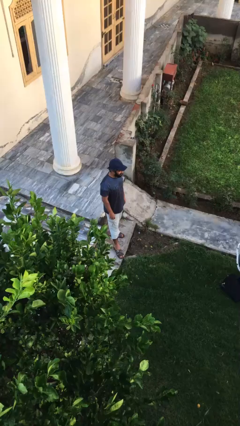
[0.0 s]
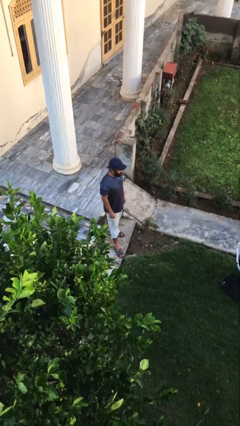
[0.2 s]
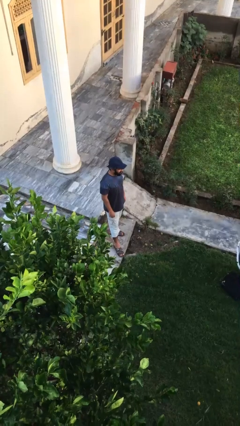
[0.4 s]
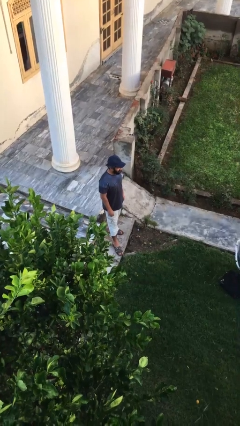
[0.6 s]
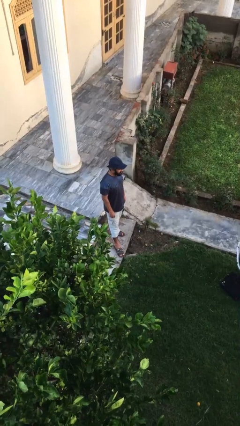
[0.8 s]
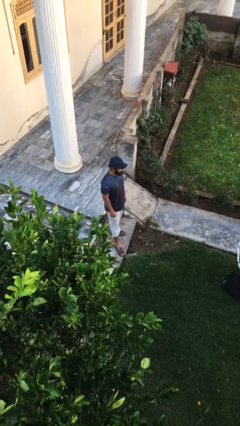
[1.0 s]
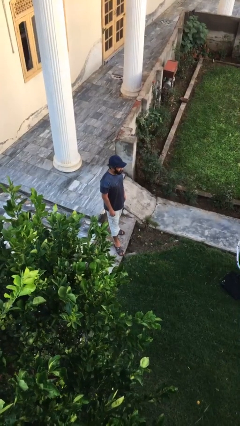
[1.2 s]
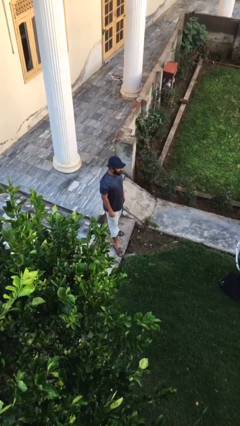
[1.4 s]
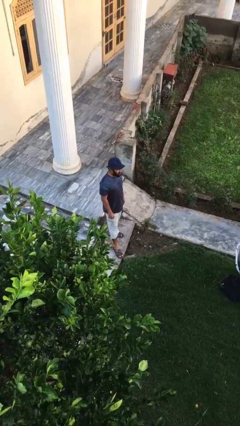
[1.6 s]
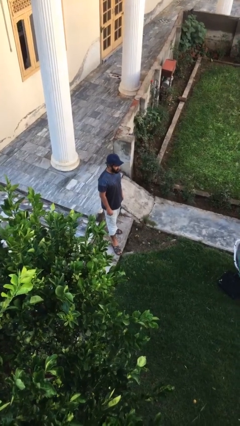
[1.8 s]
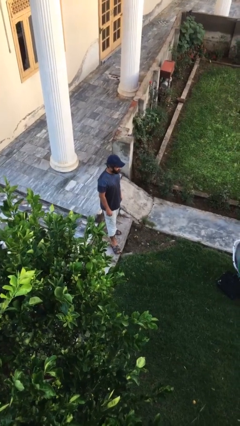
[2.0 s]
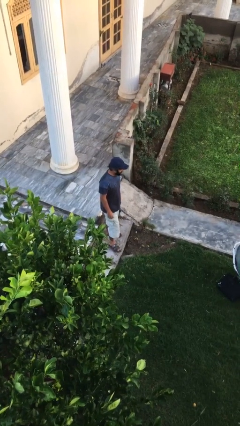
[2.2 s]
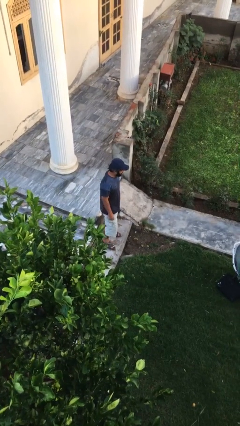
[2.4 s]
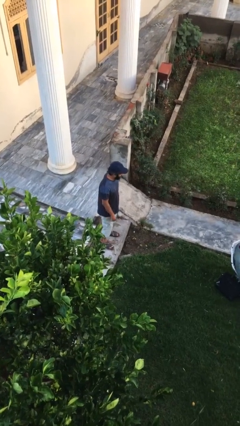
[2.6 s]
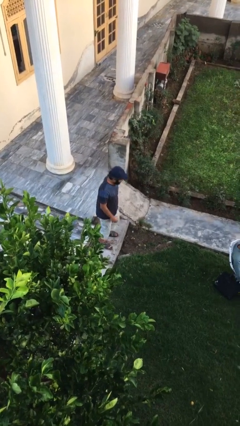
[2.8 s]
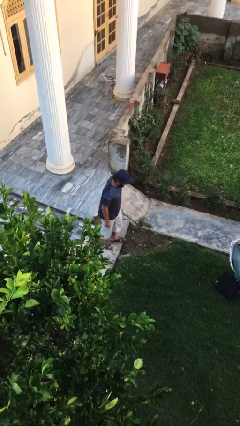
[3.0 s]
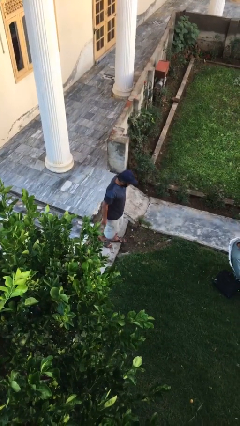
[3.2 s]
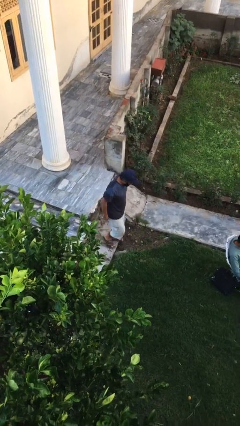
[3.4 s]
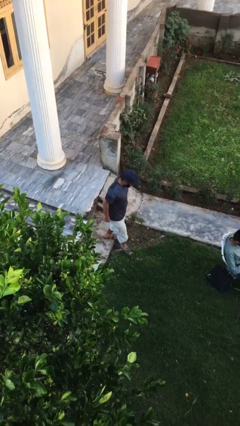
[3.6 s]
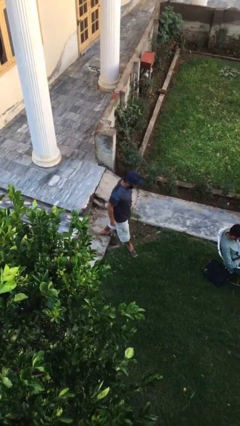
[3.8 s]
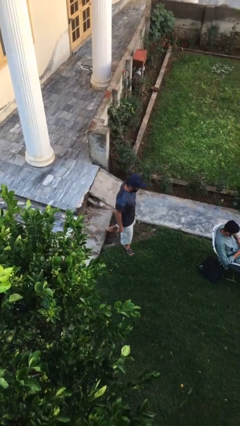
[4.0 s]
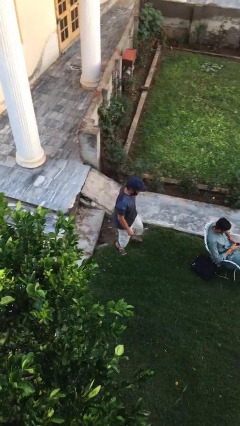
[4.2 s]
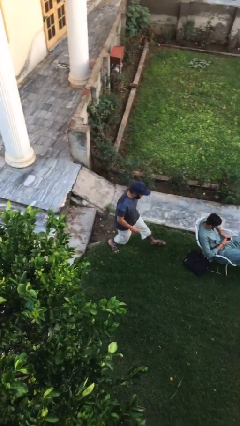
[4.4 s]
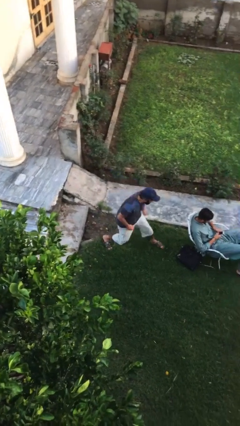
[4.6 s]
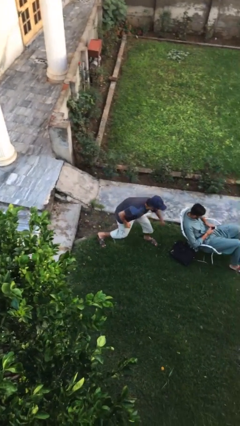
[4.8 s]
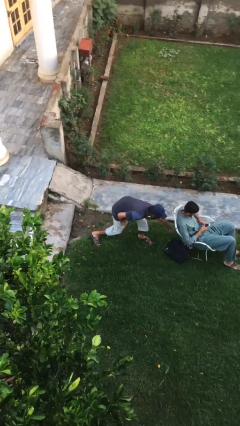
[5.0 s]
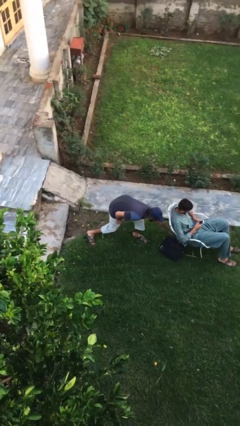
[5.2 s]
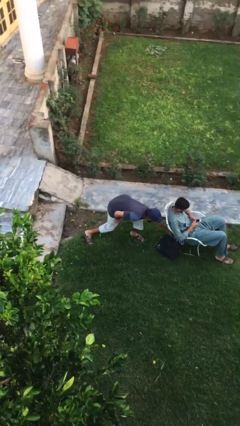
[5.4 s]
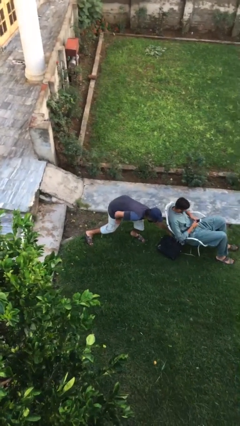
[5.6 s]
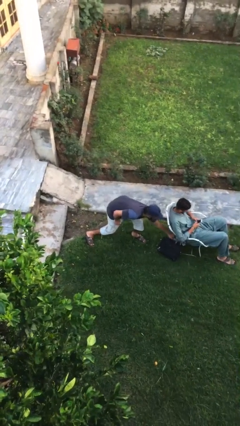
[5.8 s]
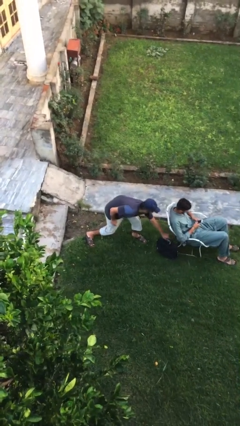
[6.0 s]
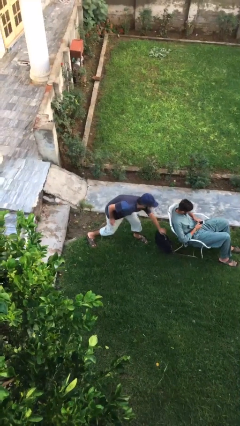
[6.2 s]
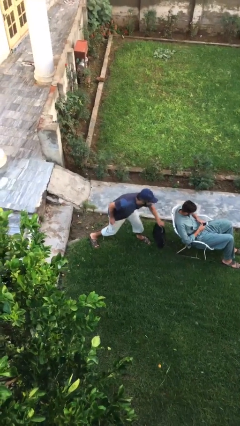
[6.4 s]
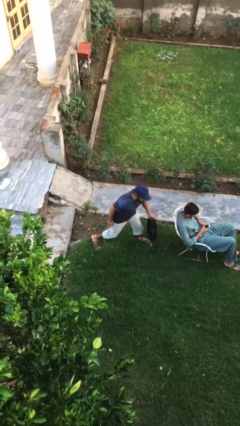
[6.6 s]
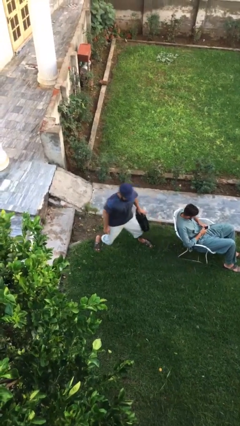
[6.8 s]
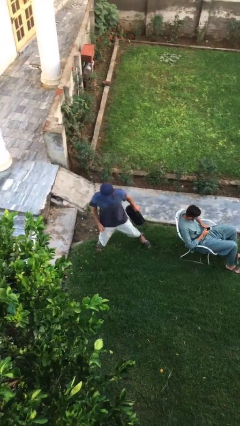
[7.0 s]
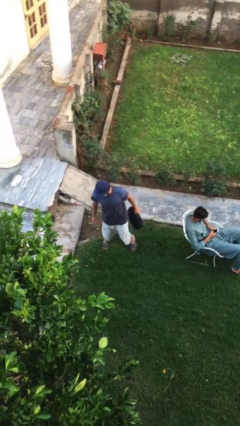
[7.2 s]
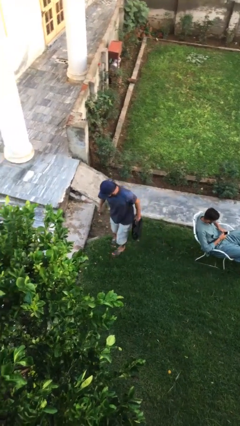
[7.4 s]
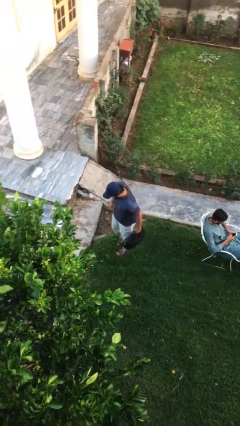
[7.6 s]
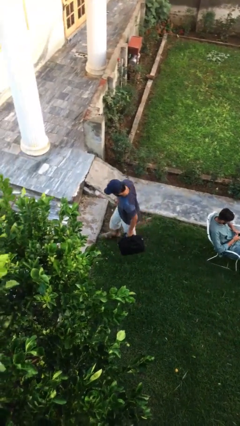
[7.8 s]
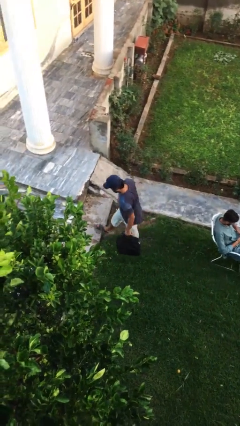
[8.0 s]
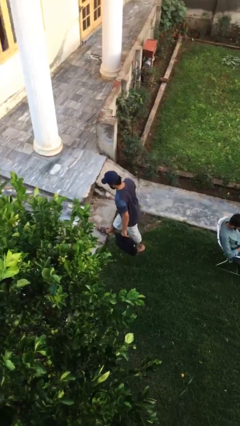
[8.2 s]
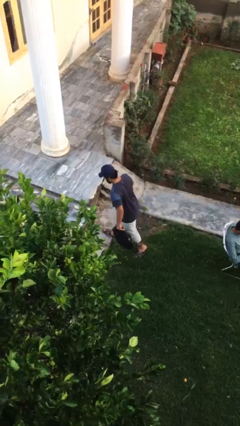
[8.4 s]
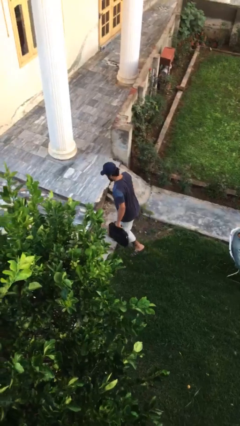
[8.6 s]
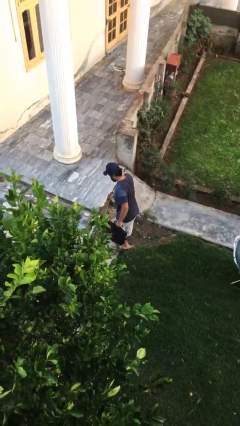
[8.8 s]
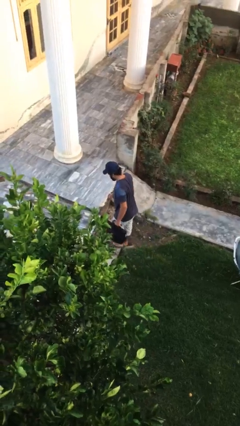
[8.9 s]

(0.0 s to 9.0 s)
person steals object from person

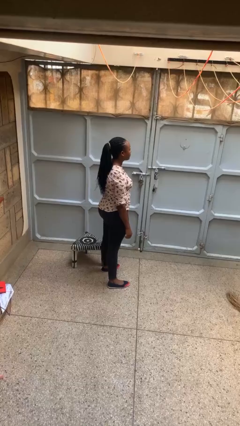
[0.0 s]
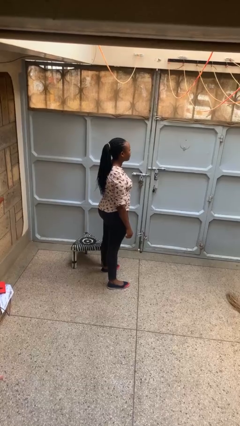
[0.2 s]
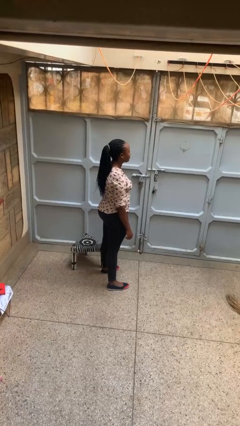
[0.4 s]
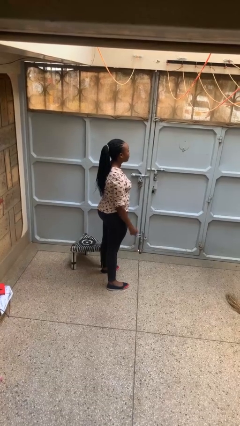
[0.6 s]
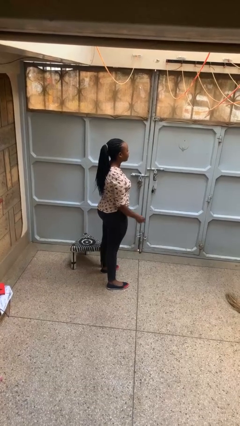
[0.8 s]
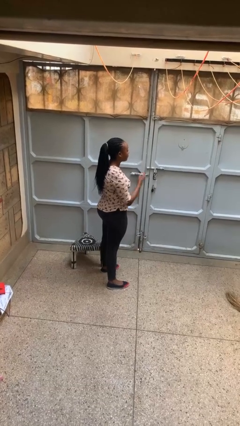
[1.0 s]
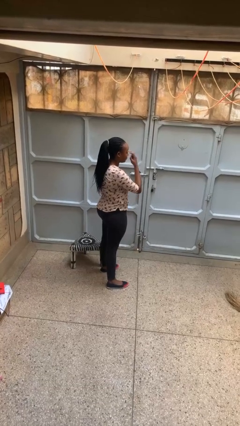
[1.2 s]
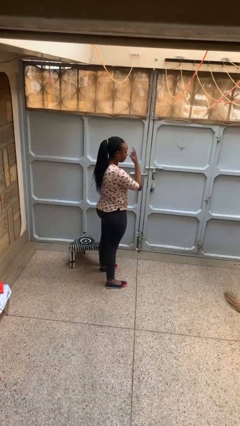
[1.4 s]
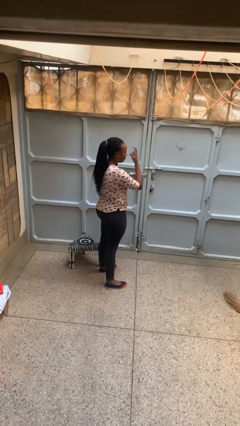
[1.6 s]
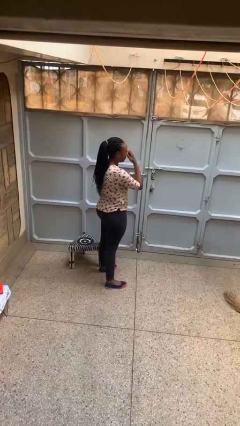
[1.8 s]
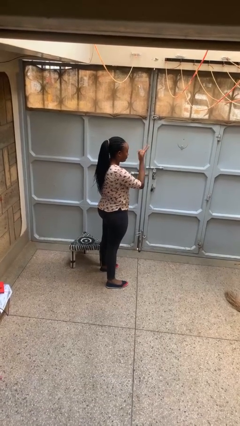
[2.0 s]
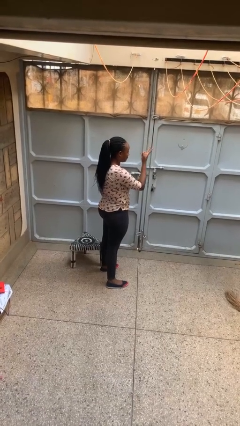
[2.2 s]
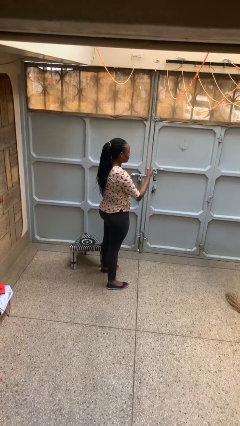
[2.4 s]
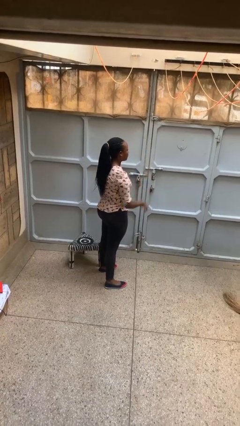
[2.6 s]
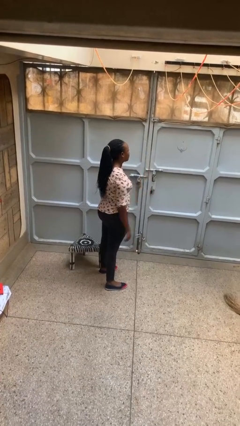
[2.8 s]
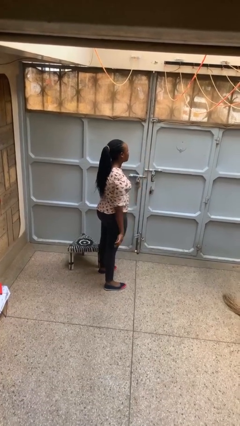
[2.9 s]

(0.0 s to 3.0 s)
person gestures watch closely

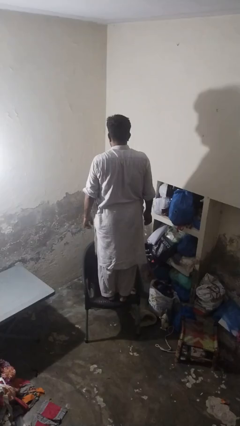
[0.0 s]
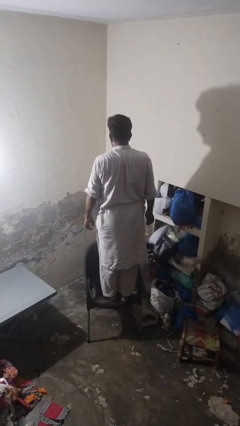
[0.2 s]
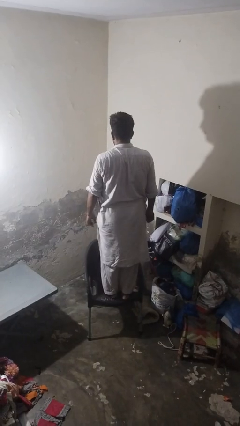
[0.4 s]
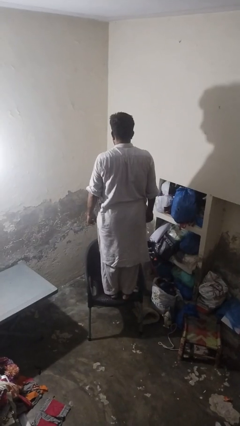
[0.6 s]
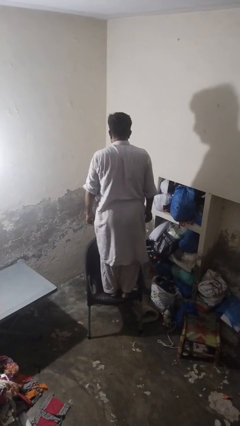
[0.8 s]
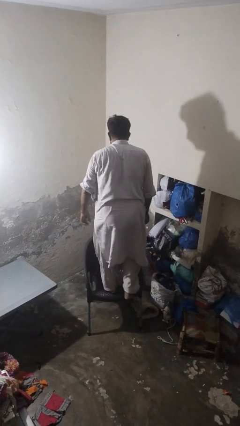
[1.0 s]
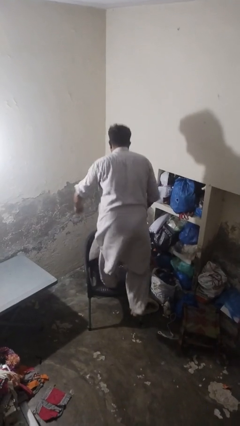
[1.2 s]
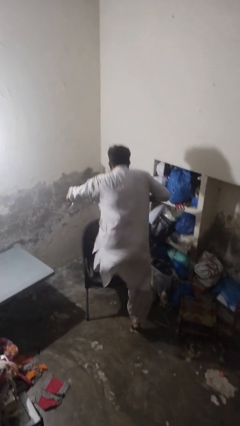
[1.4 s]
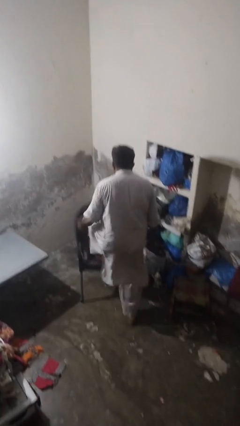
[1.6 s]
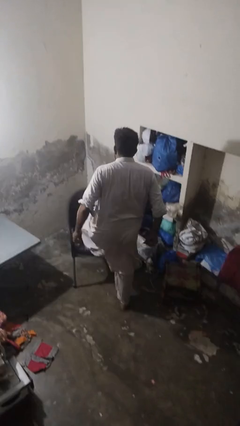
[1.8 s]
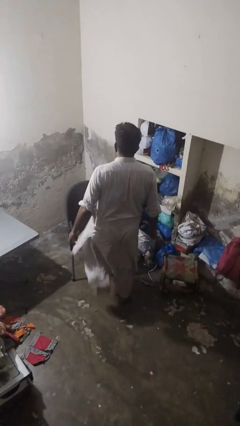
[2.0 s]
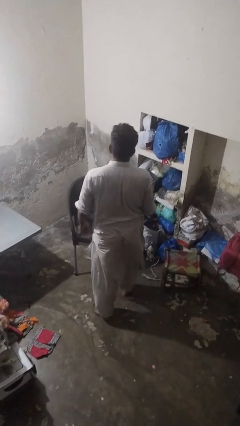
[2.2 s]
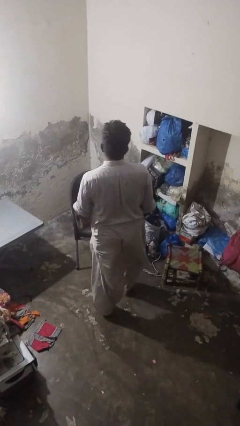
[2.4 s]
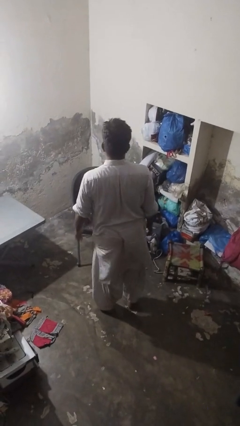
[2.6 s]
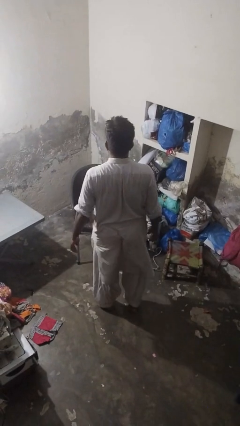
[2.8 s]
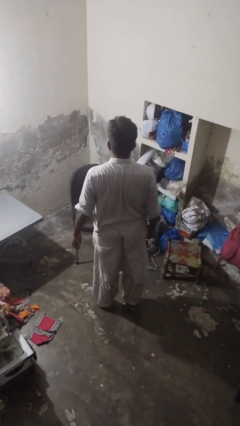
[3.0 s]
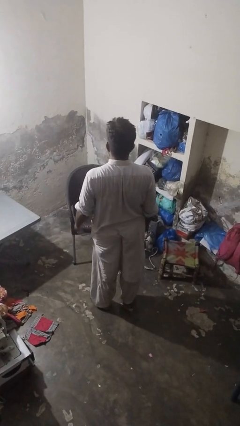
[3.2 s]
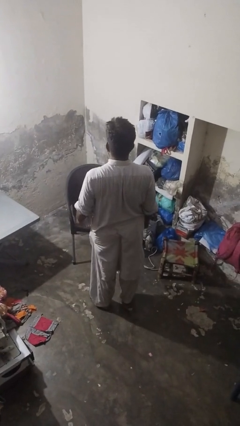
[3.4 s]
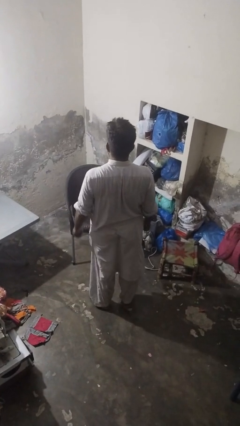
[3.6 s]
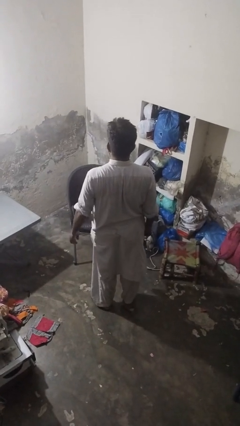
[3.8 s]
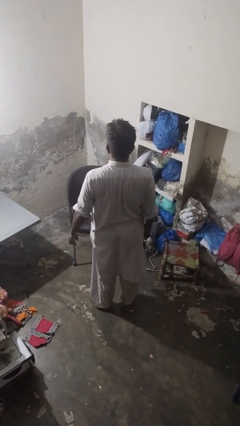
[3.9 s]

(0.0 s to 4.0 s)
person climbs off chair

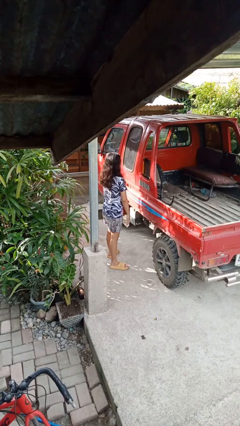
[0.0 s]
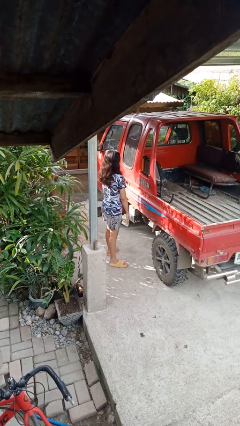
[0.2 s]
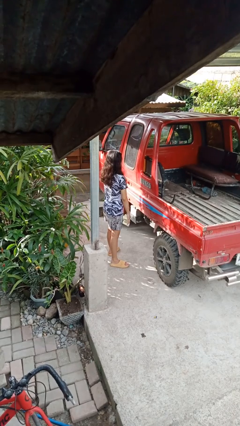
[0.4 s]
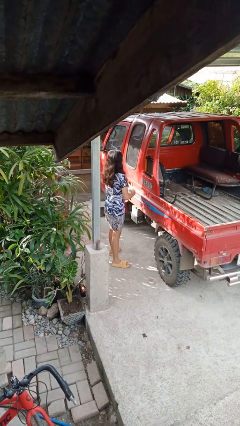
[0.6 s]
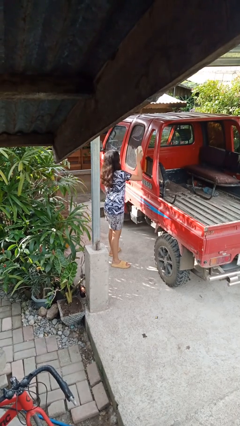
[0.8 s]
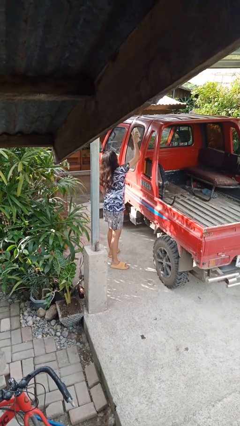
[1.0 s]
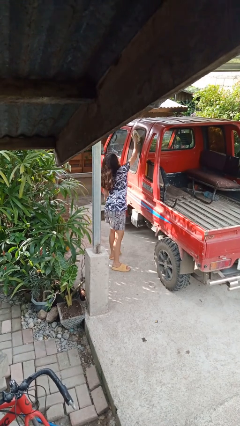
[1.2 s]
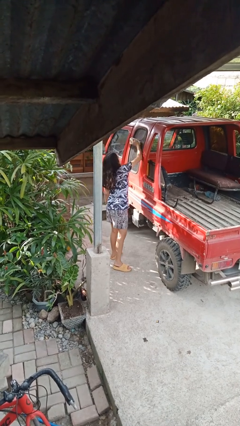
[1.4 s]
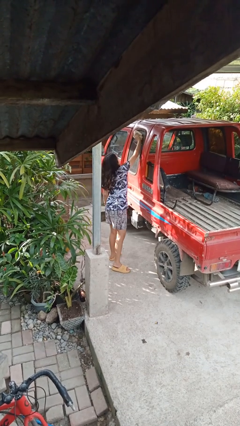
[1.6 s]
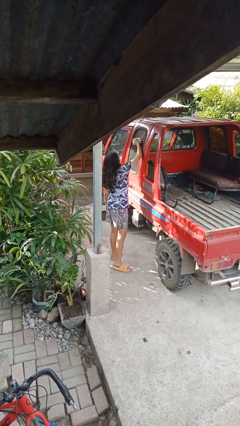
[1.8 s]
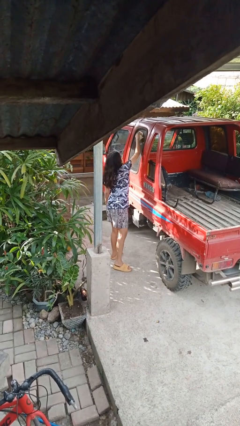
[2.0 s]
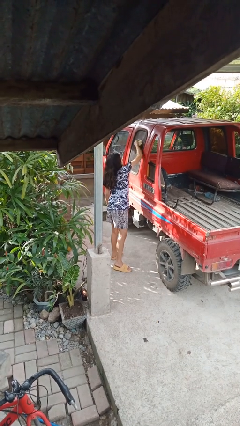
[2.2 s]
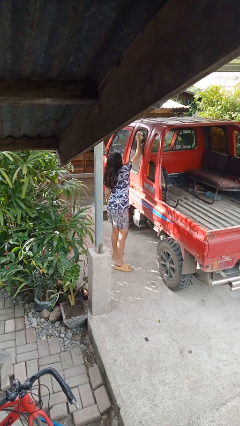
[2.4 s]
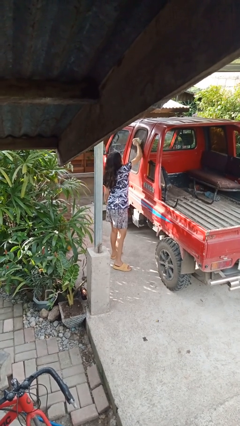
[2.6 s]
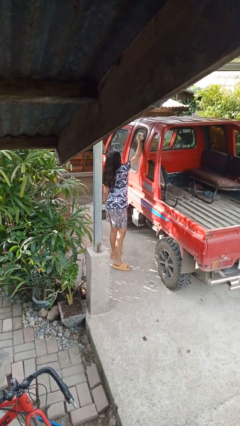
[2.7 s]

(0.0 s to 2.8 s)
person polishes car with rag
